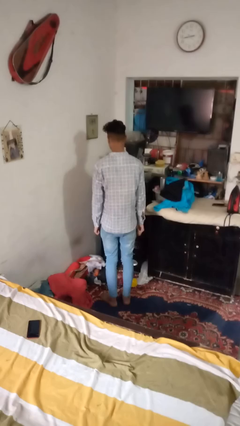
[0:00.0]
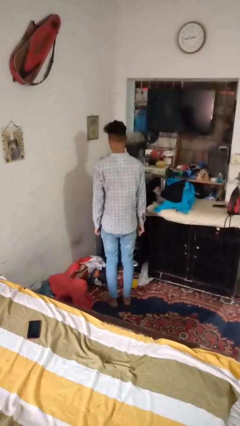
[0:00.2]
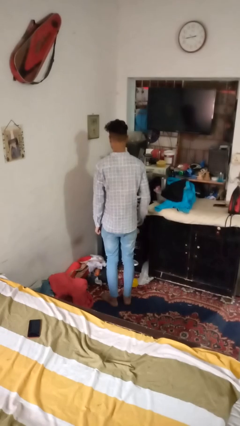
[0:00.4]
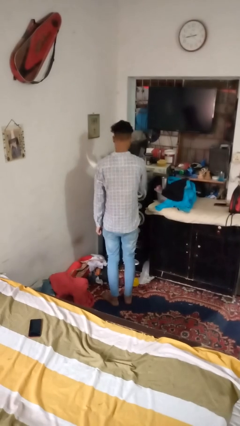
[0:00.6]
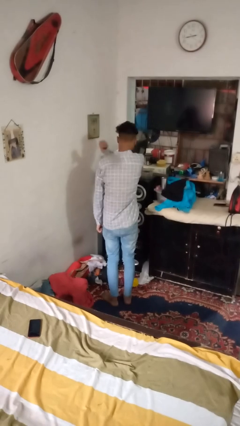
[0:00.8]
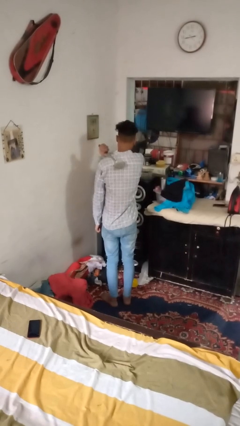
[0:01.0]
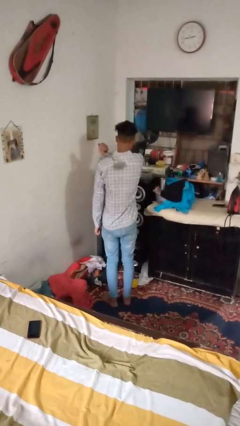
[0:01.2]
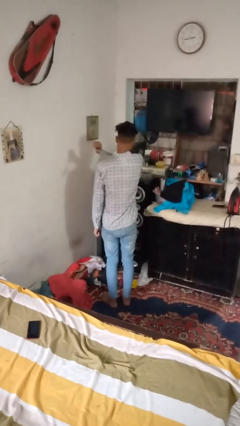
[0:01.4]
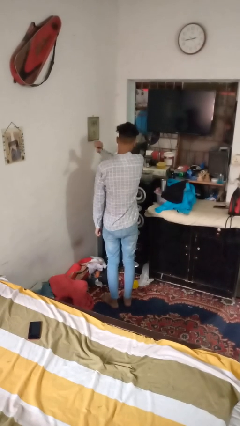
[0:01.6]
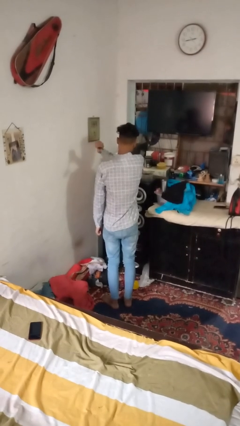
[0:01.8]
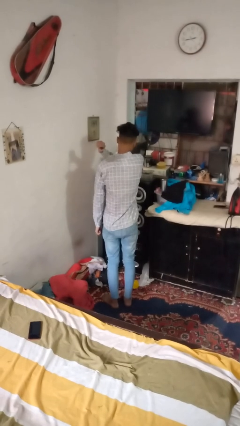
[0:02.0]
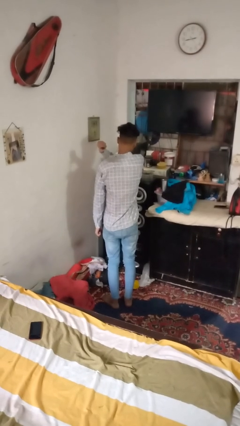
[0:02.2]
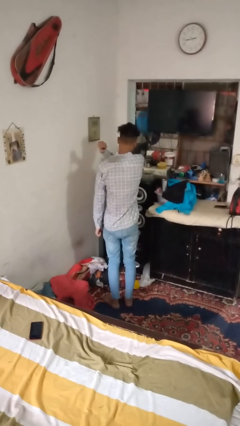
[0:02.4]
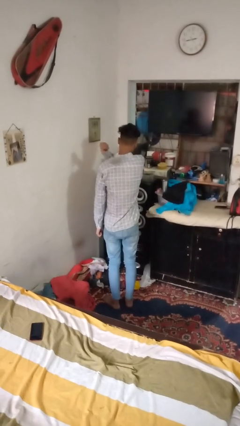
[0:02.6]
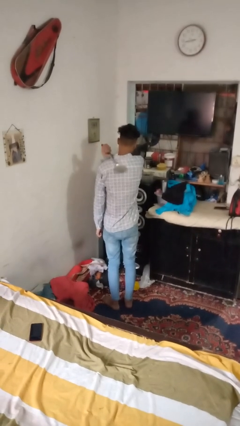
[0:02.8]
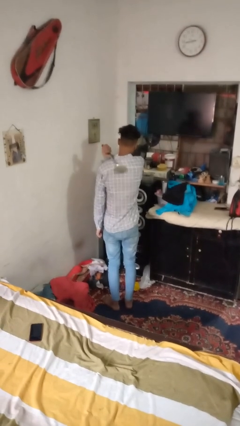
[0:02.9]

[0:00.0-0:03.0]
person swats bug

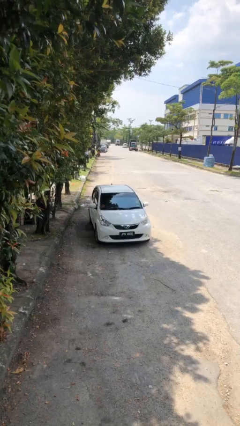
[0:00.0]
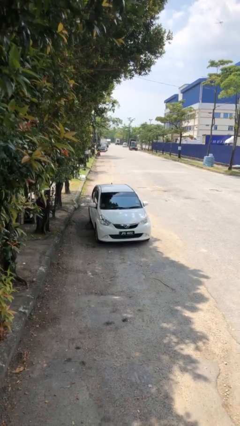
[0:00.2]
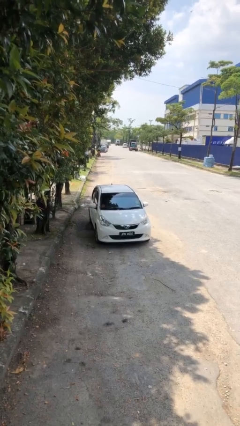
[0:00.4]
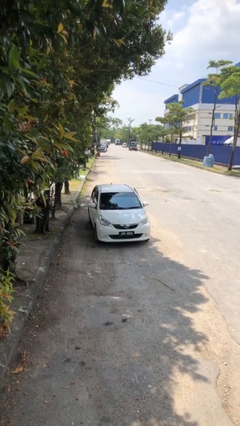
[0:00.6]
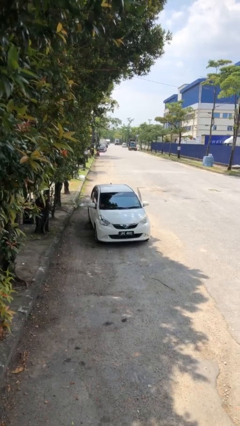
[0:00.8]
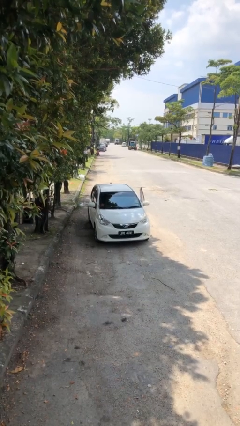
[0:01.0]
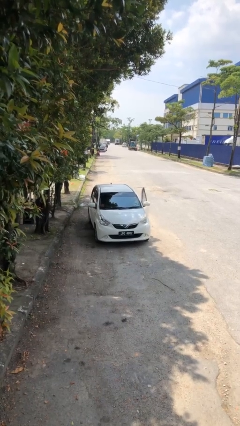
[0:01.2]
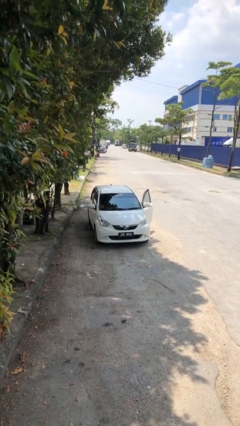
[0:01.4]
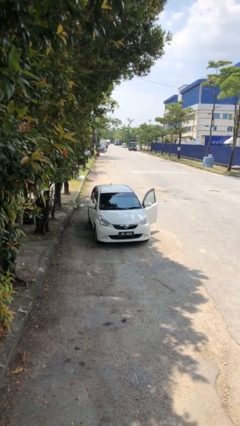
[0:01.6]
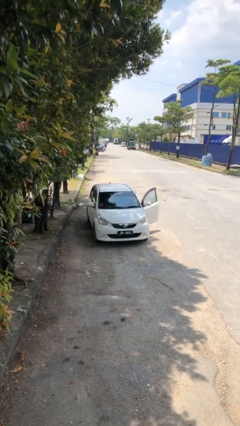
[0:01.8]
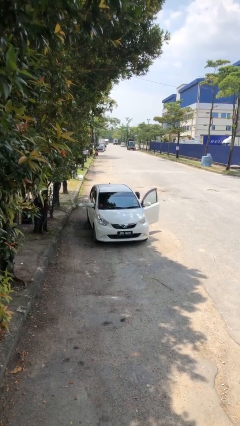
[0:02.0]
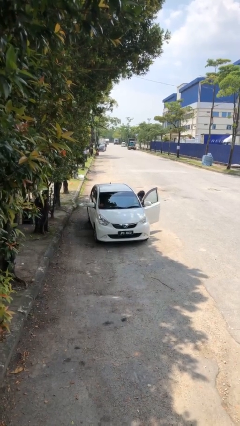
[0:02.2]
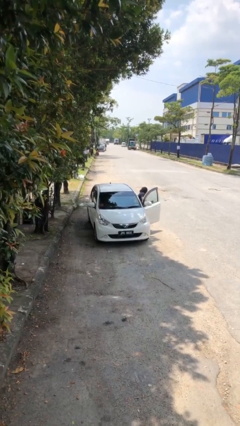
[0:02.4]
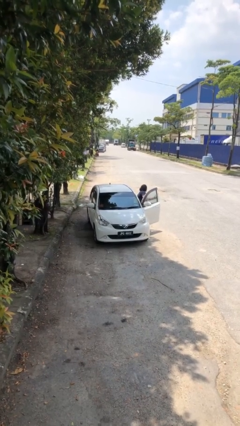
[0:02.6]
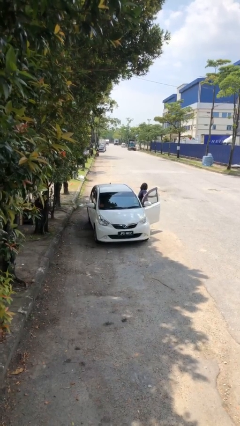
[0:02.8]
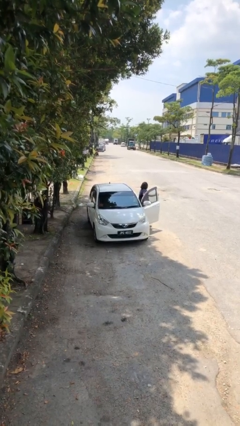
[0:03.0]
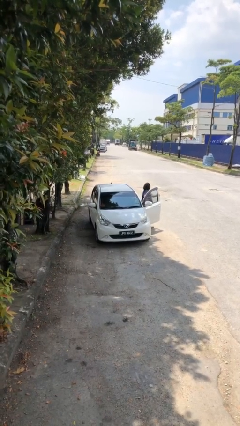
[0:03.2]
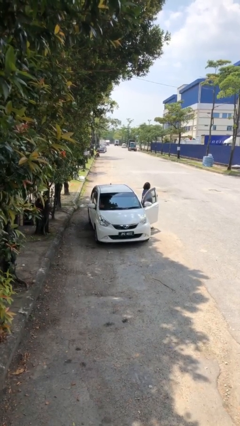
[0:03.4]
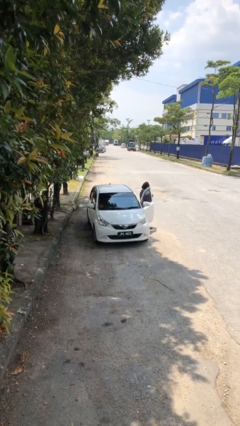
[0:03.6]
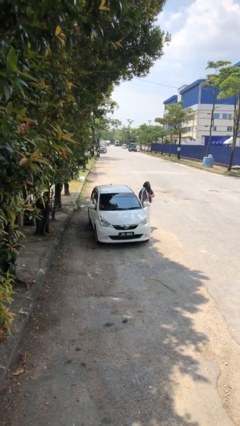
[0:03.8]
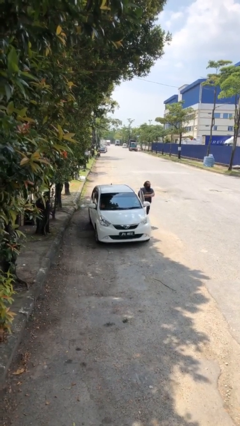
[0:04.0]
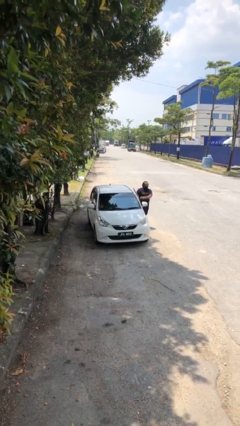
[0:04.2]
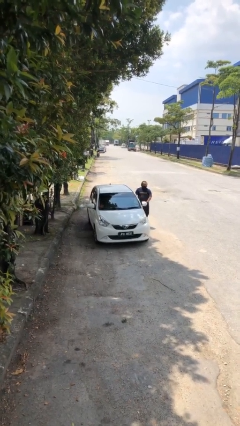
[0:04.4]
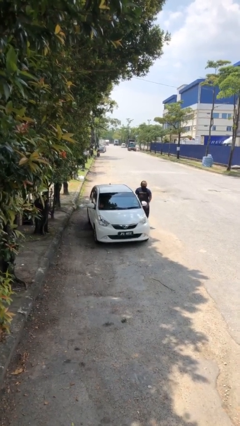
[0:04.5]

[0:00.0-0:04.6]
car drops off person

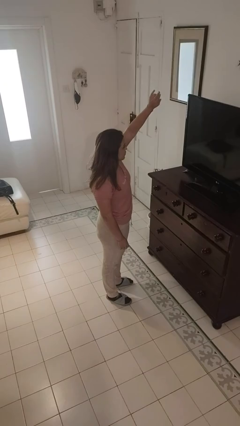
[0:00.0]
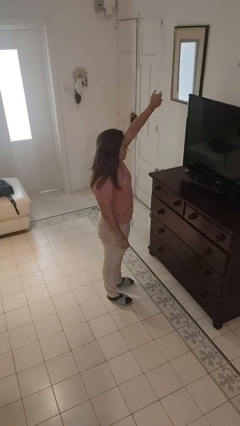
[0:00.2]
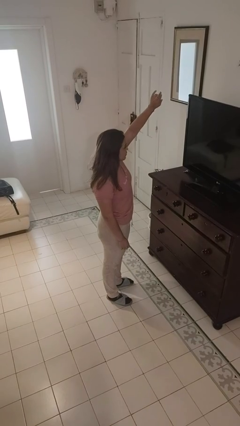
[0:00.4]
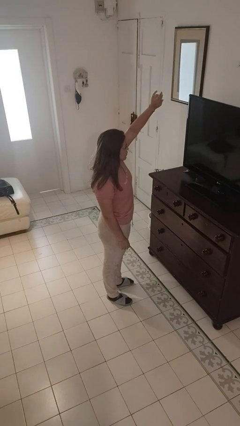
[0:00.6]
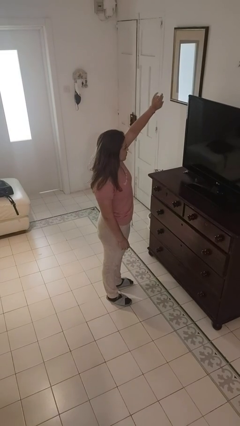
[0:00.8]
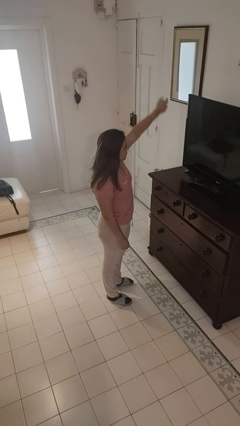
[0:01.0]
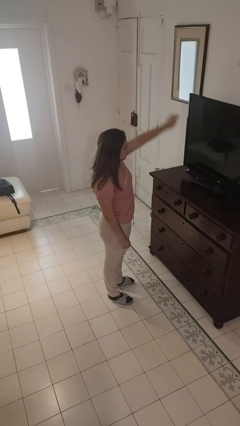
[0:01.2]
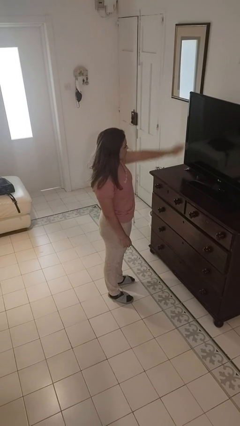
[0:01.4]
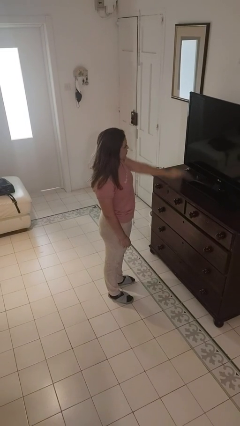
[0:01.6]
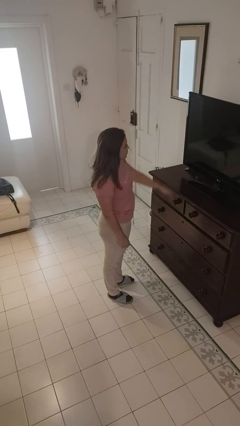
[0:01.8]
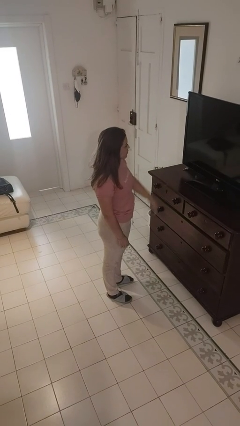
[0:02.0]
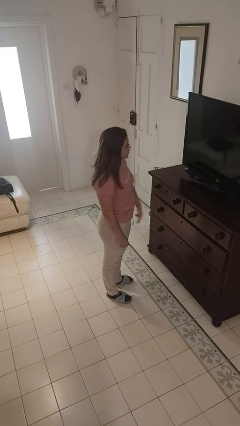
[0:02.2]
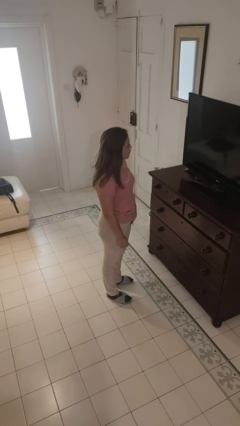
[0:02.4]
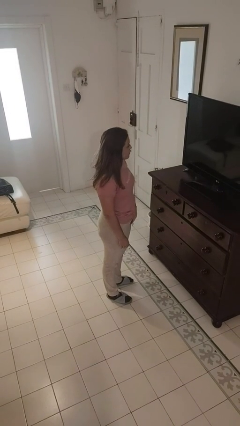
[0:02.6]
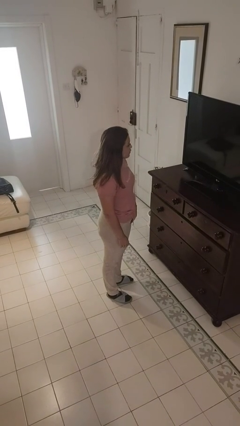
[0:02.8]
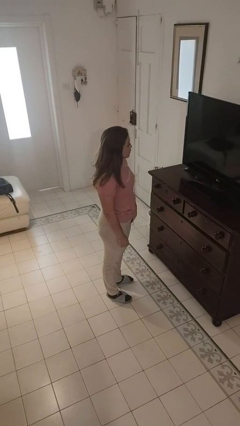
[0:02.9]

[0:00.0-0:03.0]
person gestures swipe down

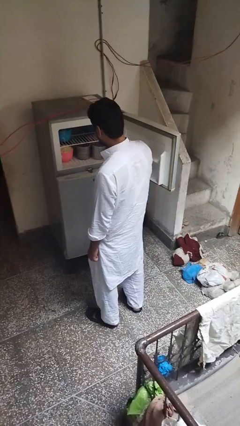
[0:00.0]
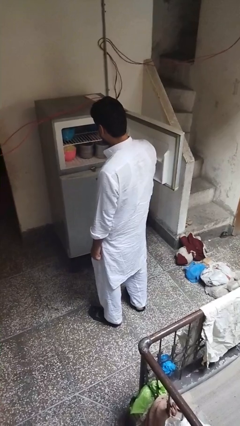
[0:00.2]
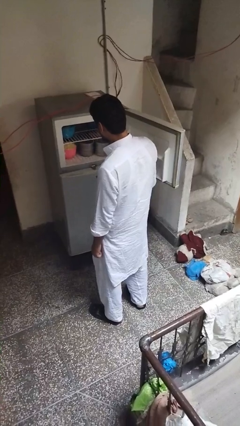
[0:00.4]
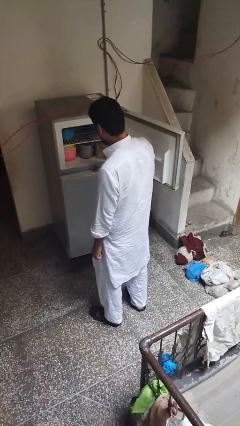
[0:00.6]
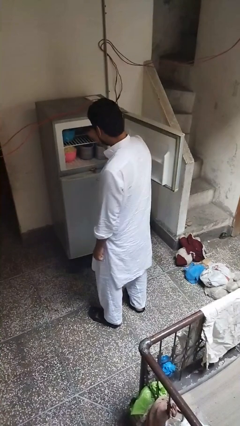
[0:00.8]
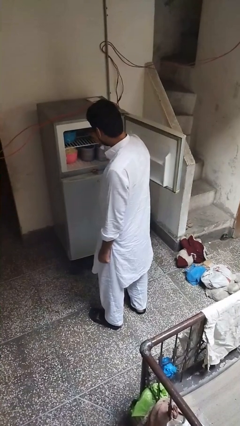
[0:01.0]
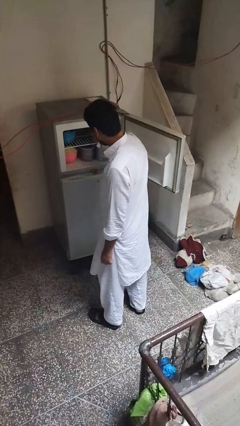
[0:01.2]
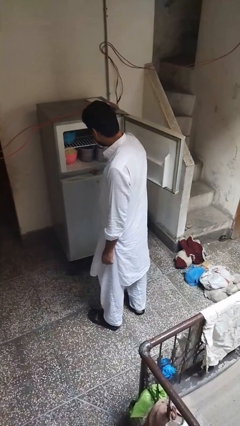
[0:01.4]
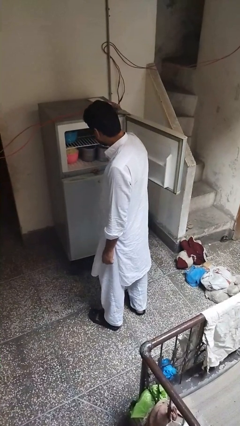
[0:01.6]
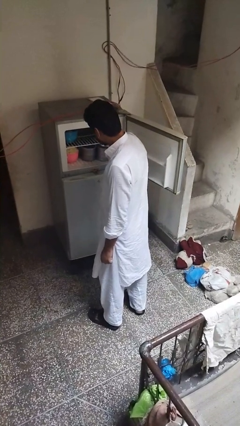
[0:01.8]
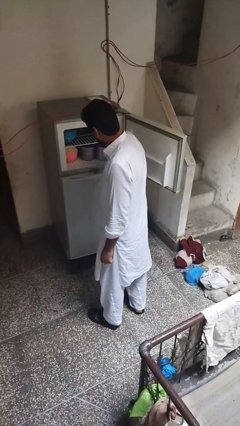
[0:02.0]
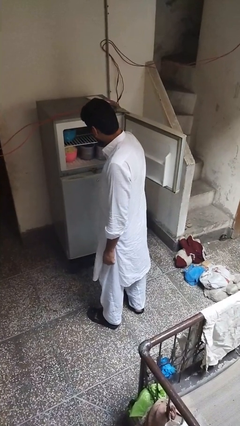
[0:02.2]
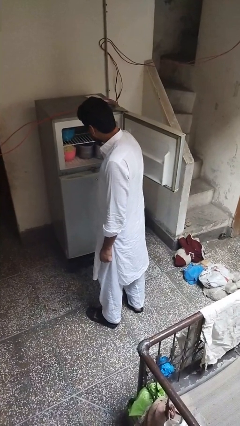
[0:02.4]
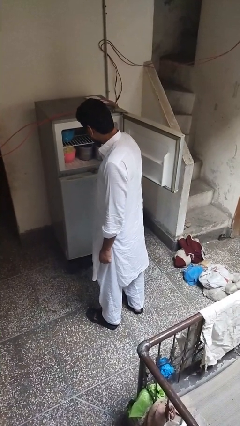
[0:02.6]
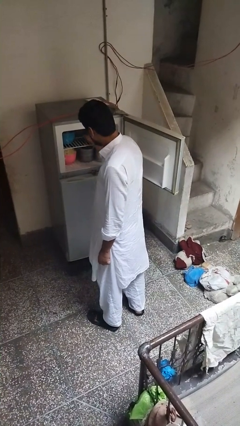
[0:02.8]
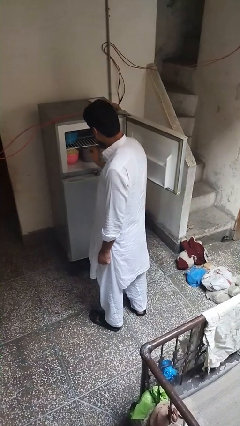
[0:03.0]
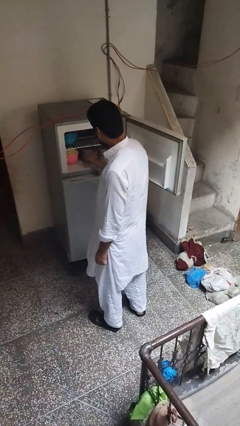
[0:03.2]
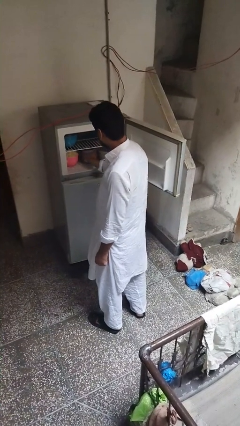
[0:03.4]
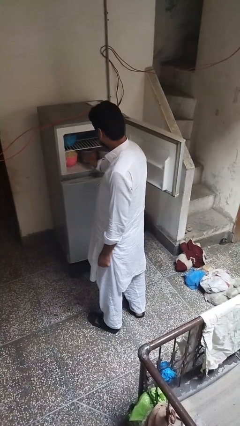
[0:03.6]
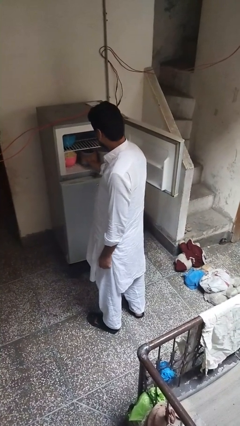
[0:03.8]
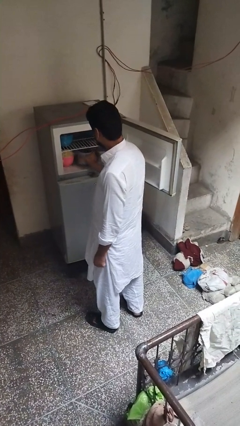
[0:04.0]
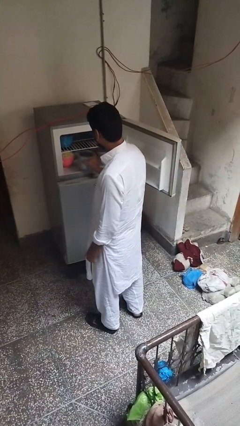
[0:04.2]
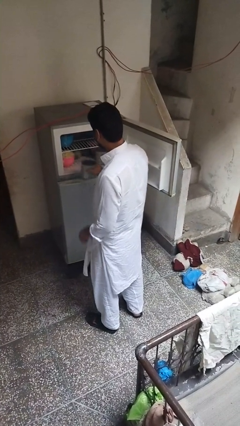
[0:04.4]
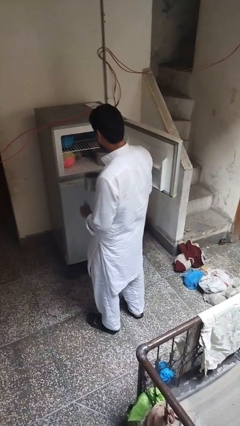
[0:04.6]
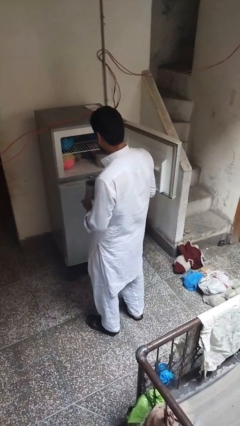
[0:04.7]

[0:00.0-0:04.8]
person takes object from refrigerator

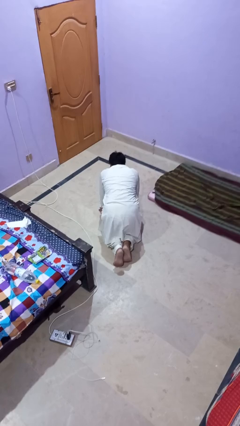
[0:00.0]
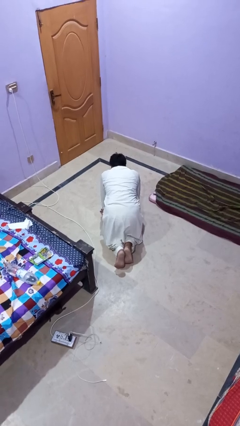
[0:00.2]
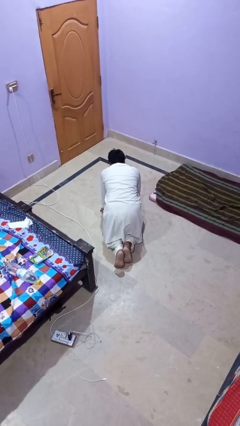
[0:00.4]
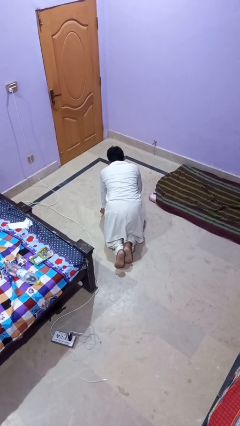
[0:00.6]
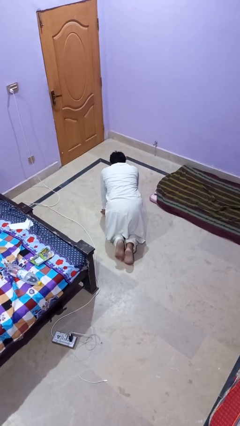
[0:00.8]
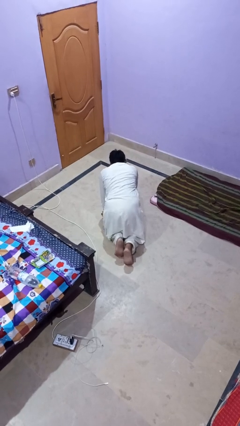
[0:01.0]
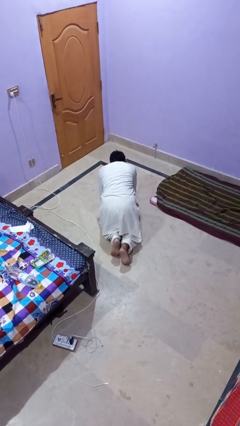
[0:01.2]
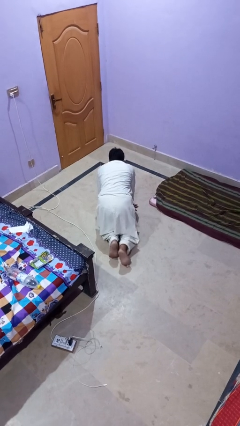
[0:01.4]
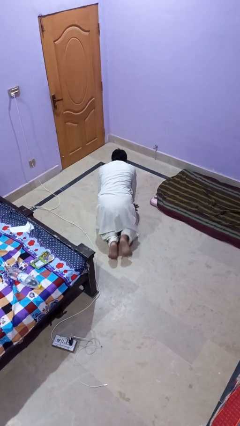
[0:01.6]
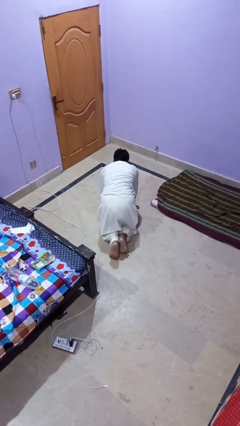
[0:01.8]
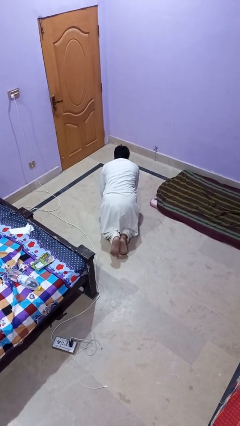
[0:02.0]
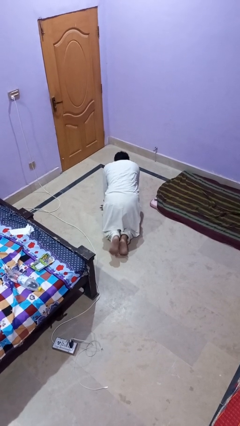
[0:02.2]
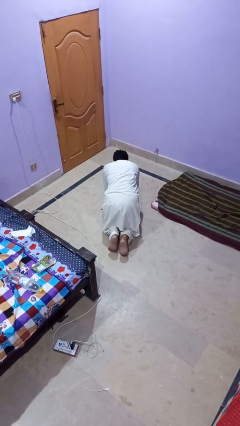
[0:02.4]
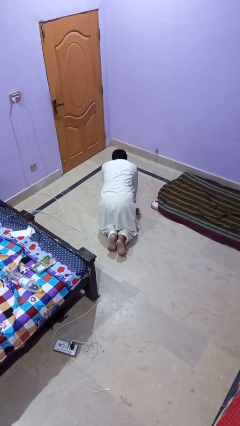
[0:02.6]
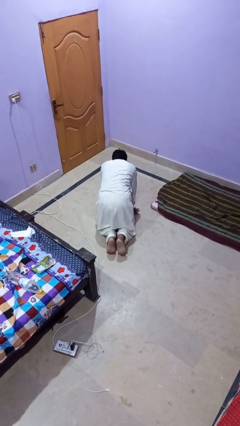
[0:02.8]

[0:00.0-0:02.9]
person crawls
